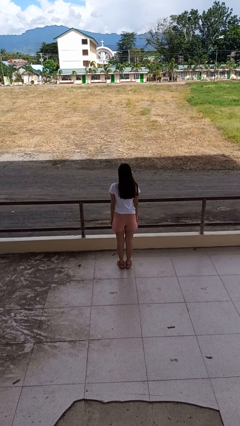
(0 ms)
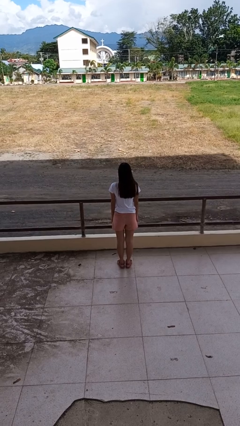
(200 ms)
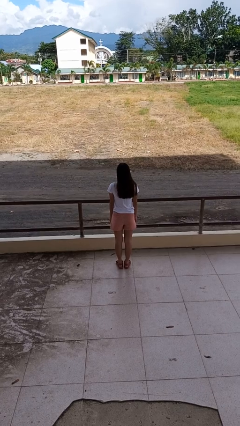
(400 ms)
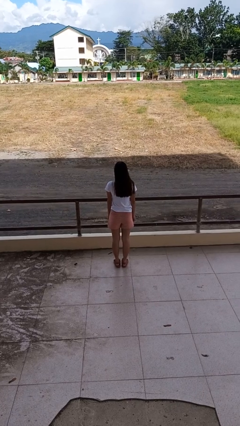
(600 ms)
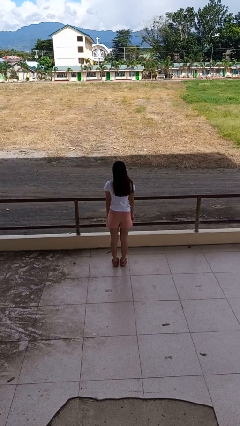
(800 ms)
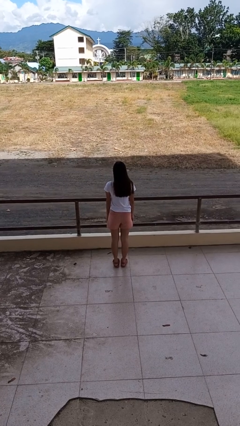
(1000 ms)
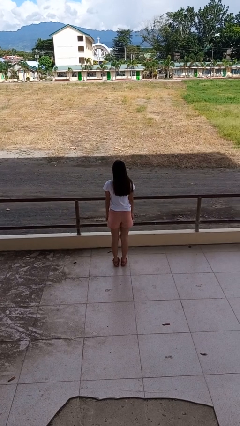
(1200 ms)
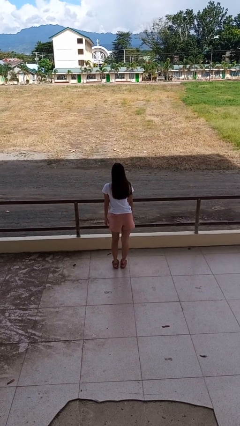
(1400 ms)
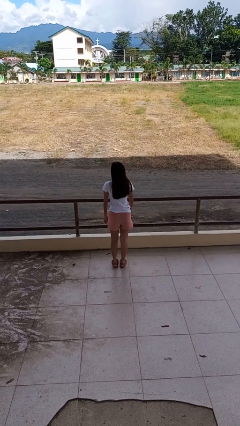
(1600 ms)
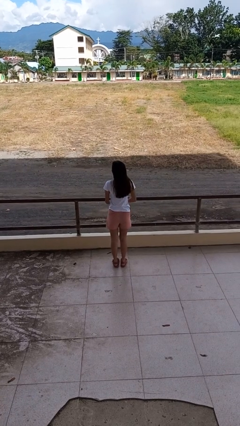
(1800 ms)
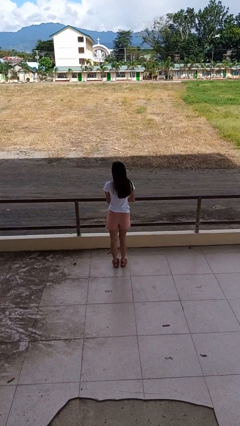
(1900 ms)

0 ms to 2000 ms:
person wiggles hips

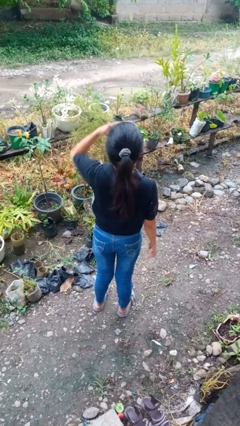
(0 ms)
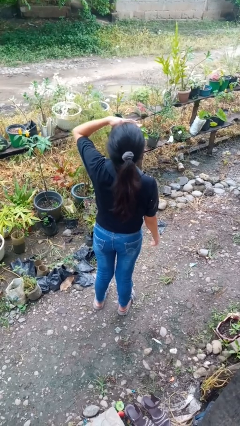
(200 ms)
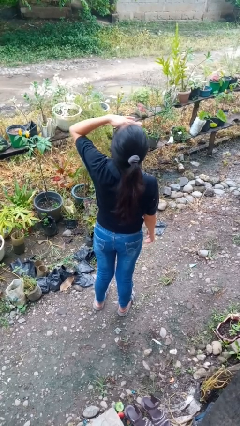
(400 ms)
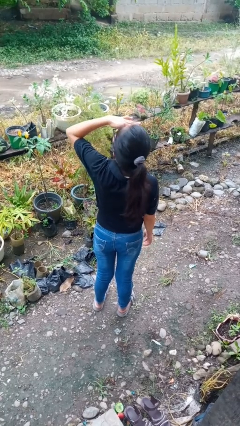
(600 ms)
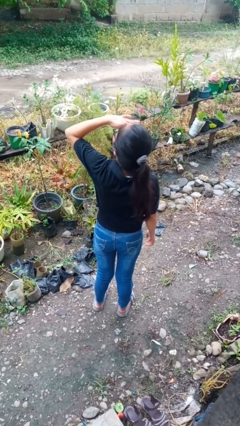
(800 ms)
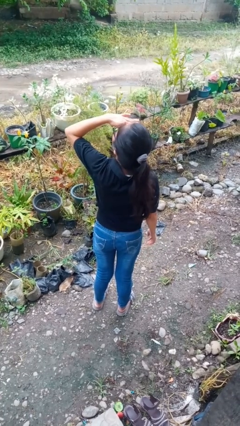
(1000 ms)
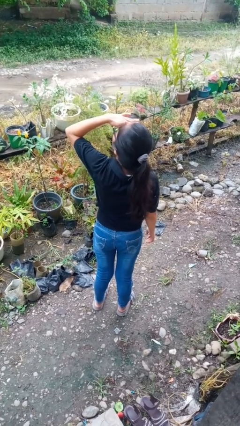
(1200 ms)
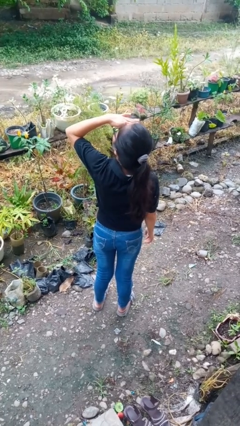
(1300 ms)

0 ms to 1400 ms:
person shades eyes

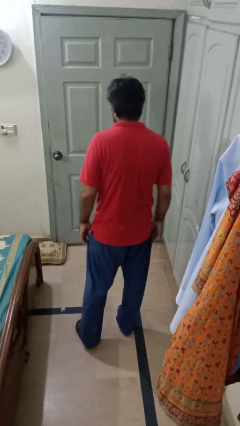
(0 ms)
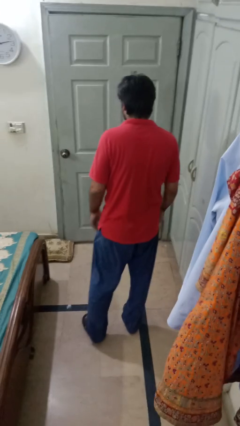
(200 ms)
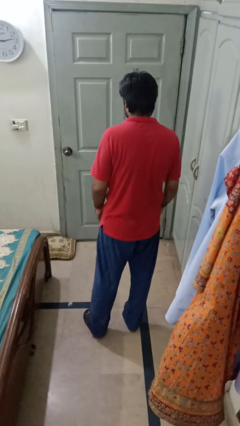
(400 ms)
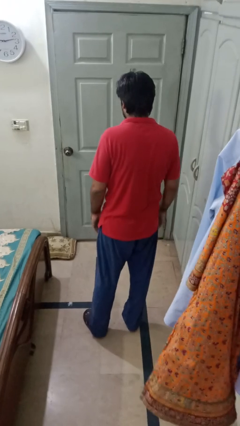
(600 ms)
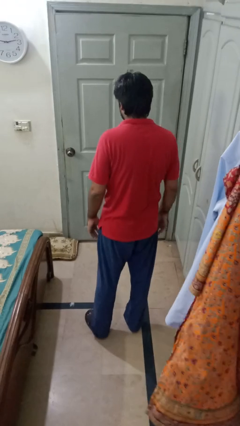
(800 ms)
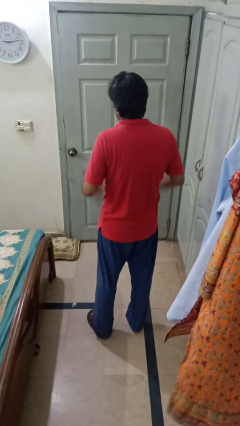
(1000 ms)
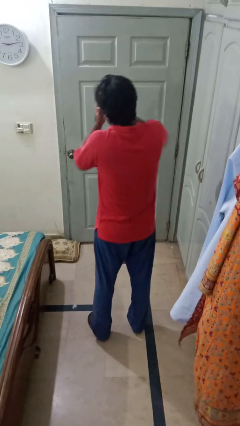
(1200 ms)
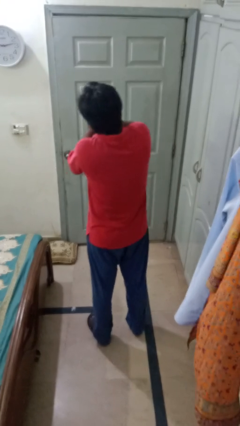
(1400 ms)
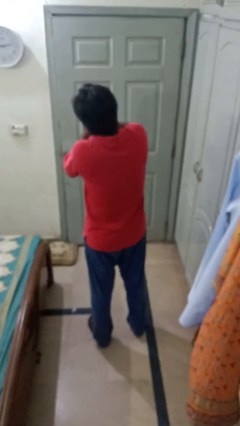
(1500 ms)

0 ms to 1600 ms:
person covers face with hands

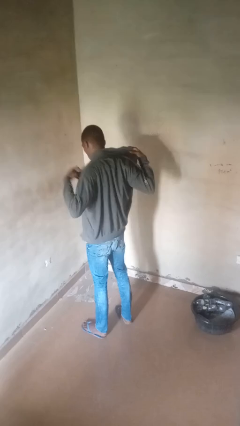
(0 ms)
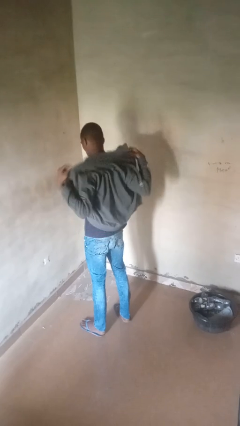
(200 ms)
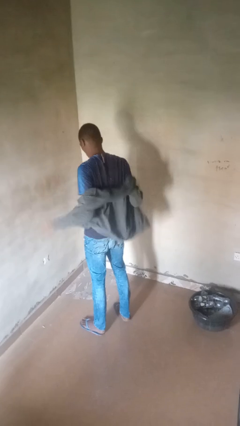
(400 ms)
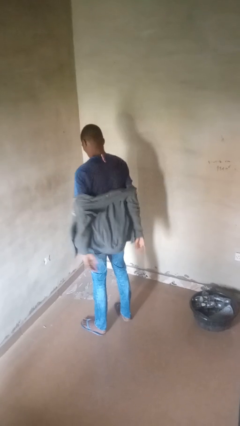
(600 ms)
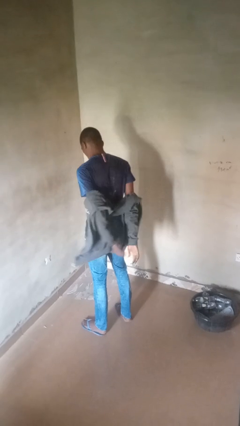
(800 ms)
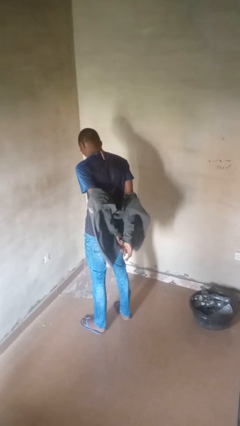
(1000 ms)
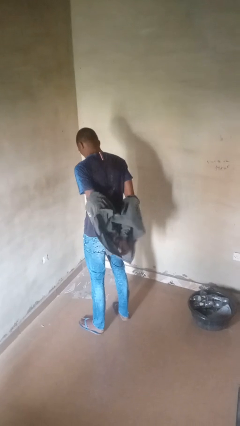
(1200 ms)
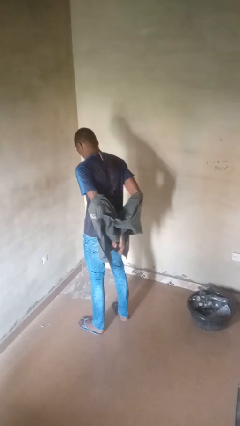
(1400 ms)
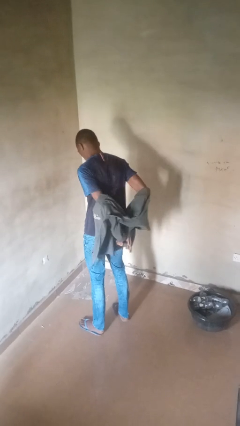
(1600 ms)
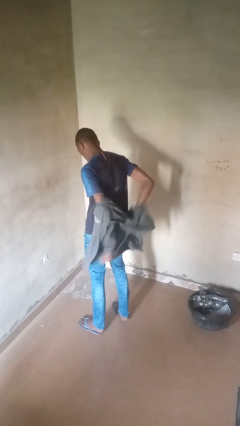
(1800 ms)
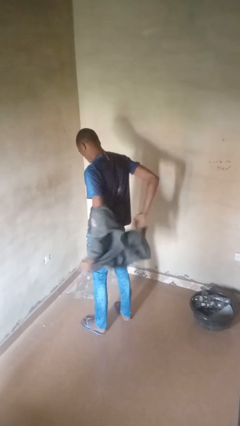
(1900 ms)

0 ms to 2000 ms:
person takes off jacket

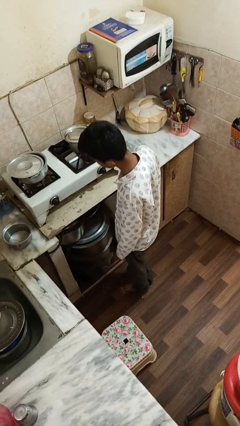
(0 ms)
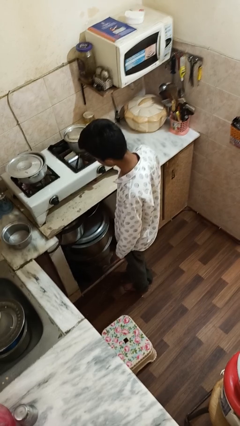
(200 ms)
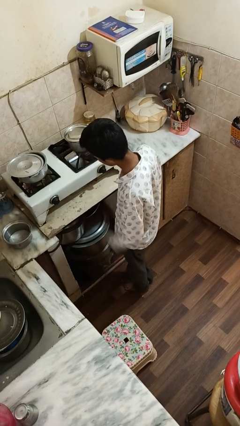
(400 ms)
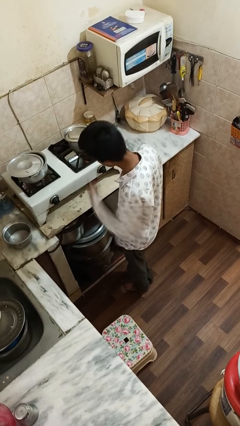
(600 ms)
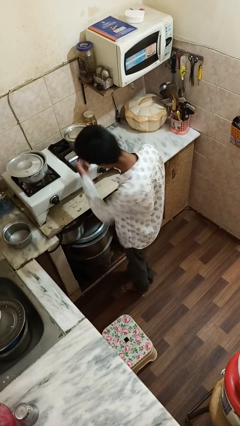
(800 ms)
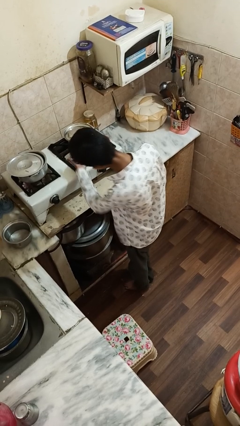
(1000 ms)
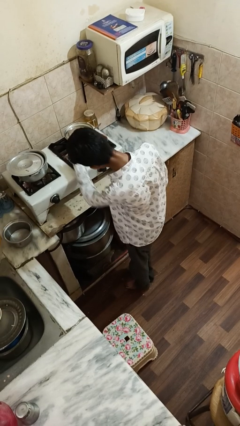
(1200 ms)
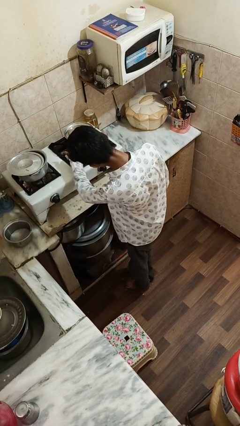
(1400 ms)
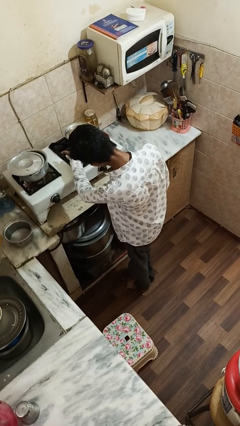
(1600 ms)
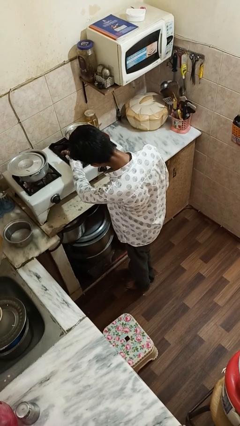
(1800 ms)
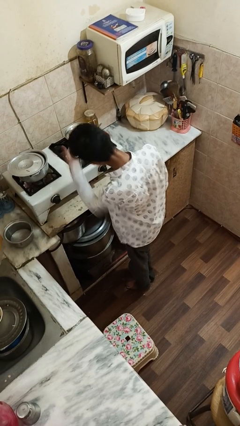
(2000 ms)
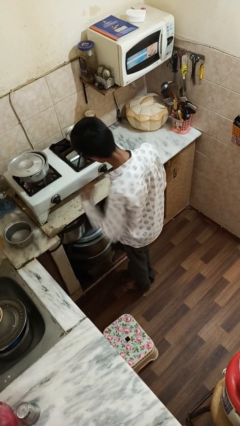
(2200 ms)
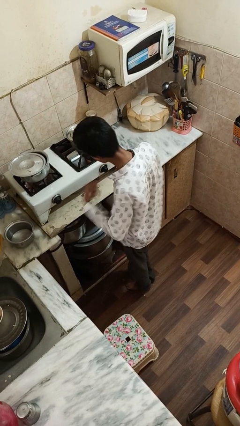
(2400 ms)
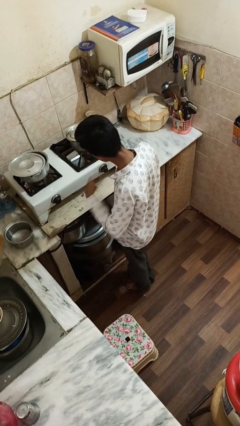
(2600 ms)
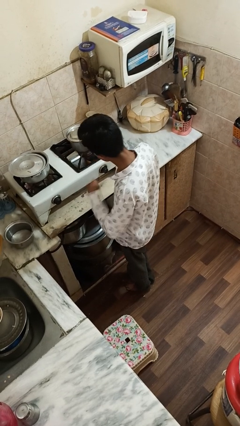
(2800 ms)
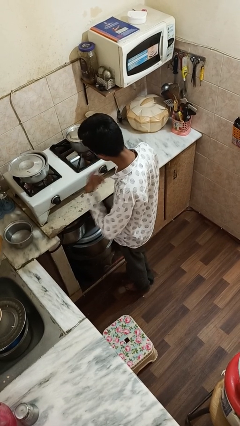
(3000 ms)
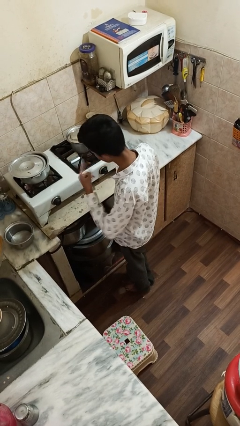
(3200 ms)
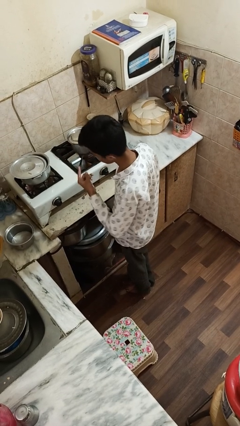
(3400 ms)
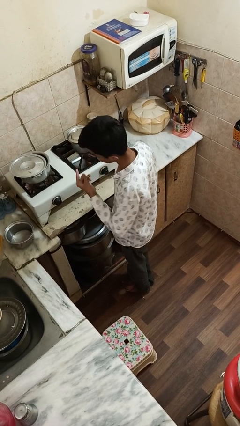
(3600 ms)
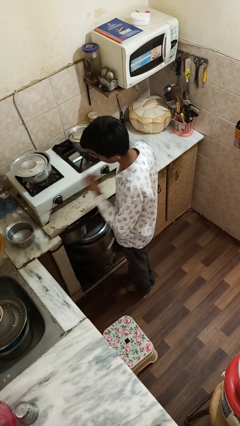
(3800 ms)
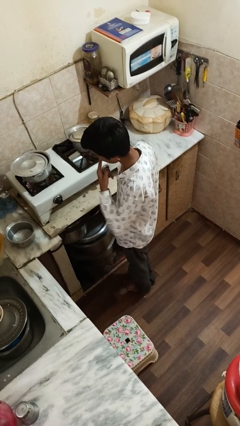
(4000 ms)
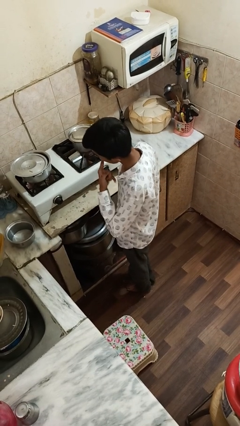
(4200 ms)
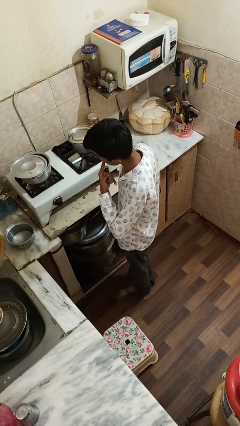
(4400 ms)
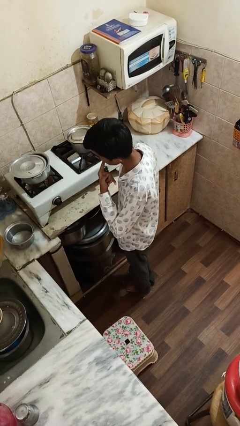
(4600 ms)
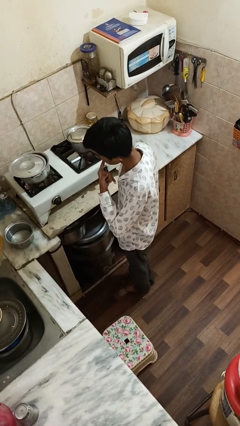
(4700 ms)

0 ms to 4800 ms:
person burns hand

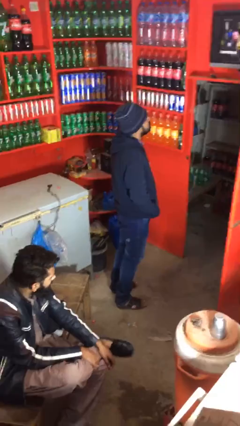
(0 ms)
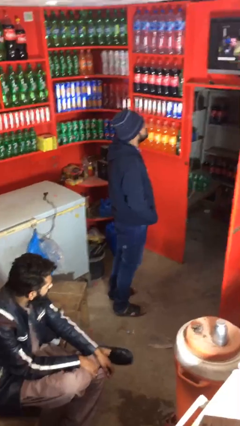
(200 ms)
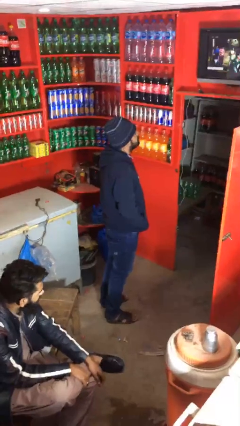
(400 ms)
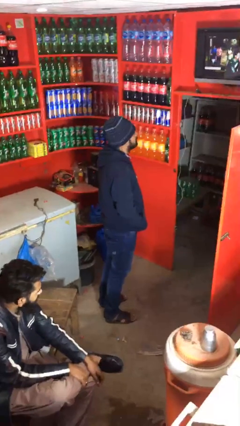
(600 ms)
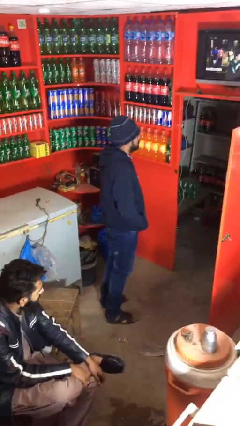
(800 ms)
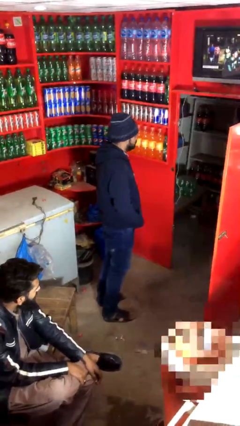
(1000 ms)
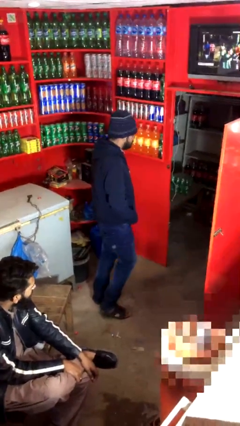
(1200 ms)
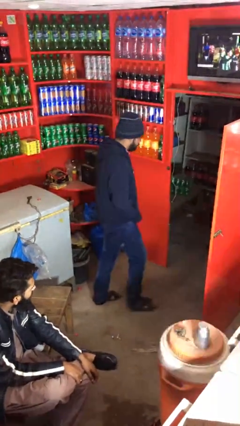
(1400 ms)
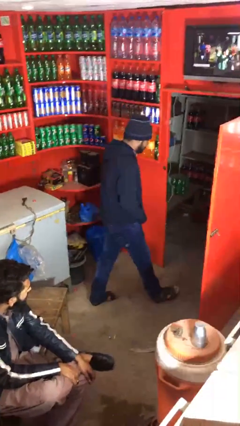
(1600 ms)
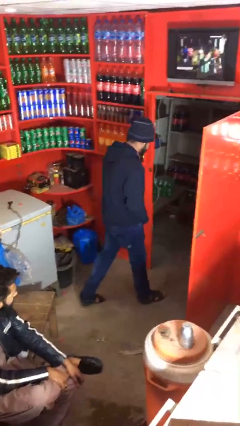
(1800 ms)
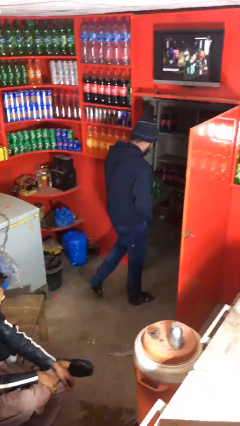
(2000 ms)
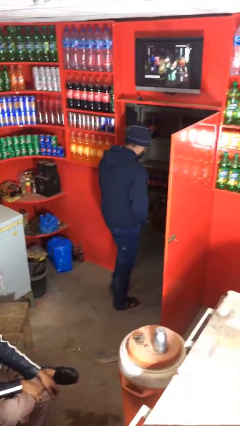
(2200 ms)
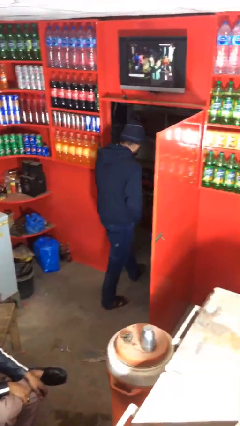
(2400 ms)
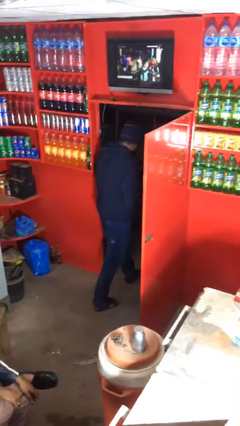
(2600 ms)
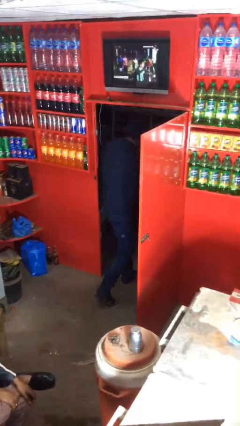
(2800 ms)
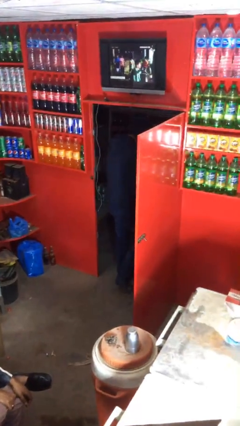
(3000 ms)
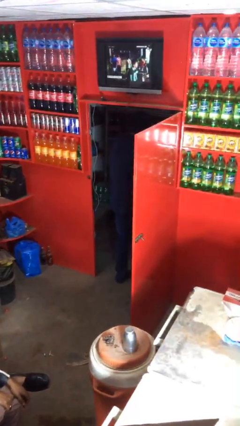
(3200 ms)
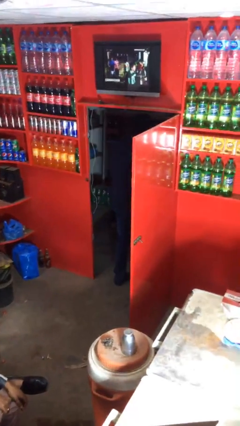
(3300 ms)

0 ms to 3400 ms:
person enters scene through structure

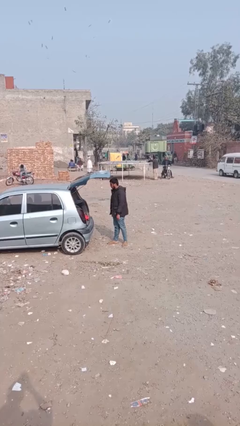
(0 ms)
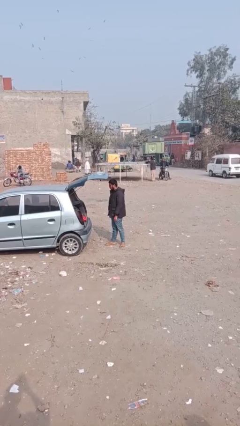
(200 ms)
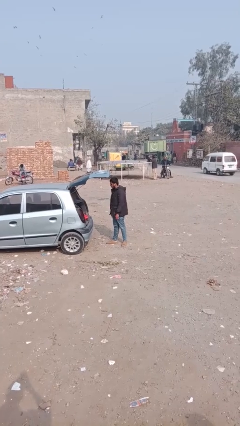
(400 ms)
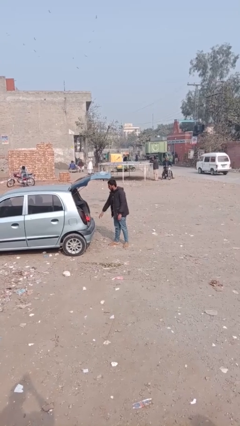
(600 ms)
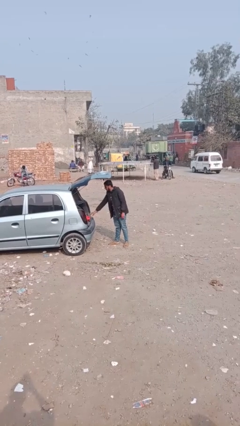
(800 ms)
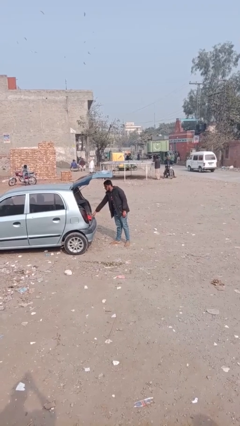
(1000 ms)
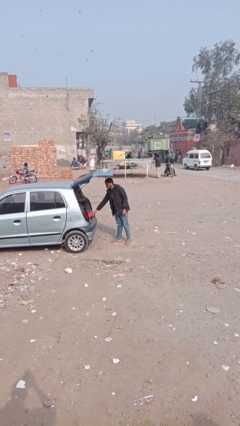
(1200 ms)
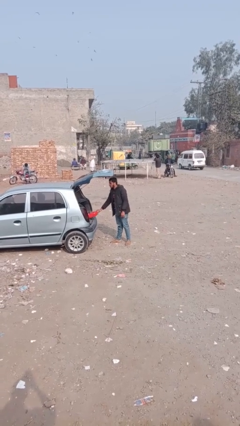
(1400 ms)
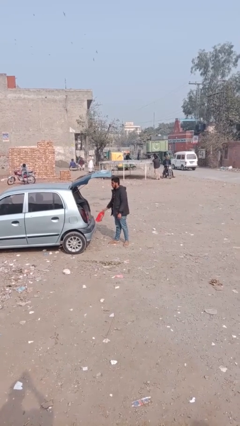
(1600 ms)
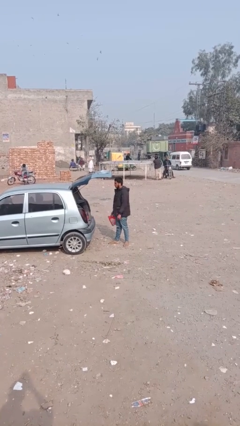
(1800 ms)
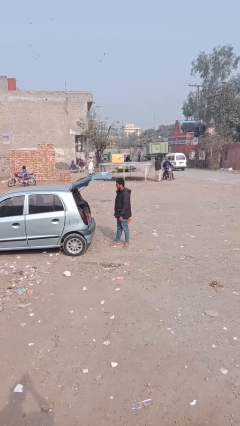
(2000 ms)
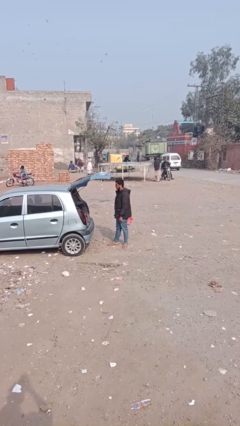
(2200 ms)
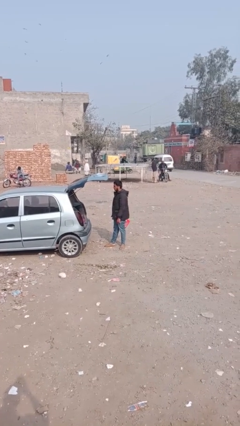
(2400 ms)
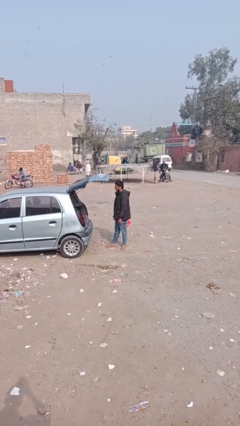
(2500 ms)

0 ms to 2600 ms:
person unloads car
